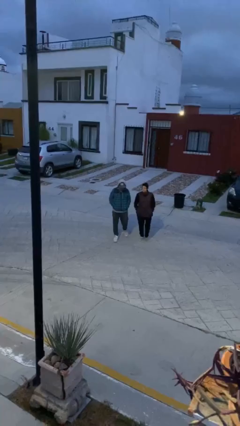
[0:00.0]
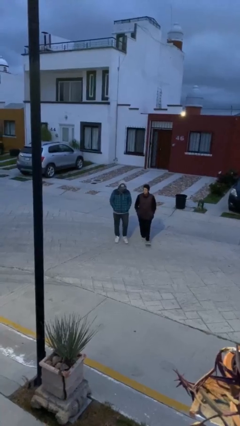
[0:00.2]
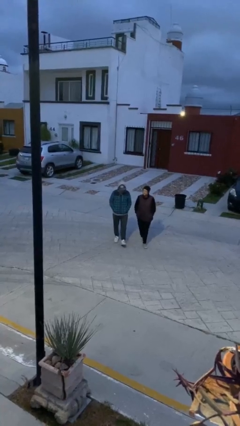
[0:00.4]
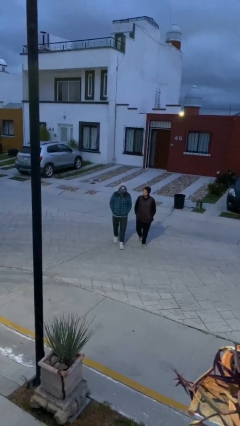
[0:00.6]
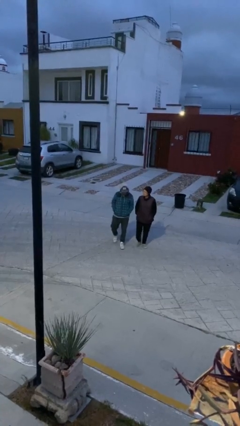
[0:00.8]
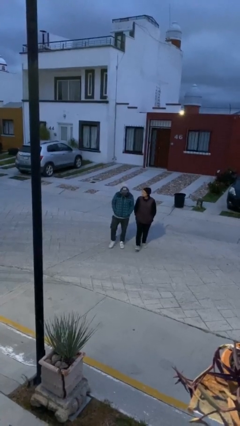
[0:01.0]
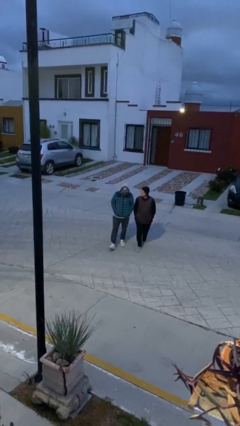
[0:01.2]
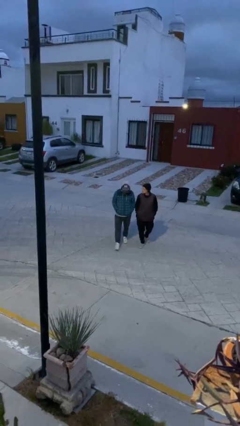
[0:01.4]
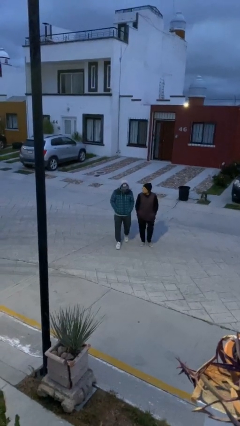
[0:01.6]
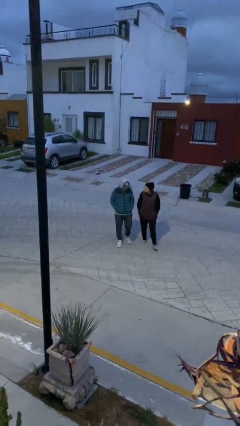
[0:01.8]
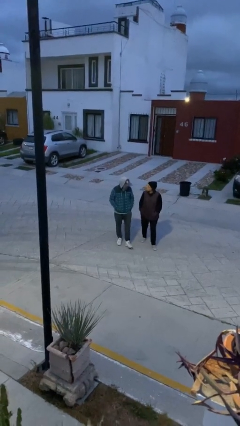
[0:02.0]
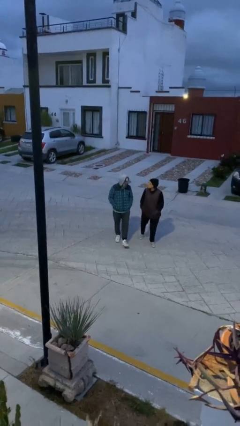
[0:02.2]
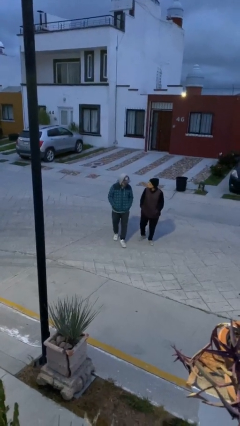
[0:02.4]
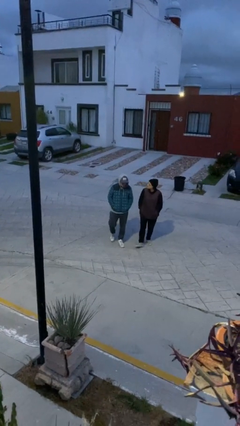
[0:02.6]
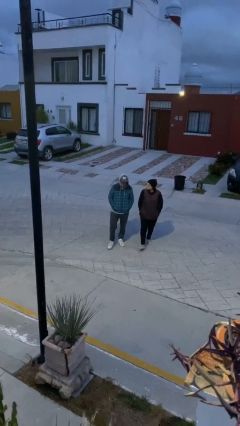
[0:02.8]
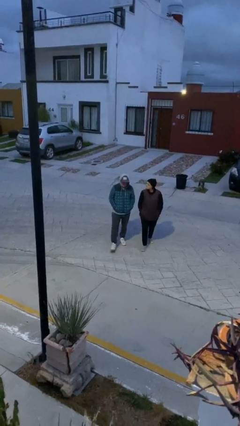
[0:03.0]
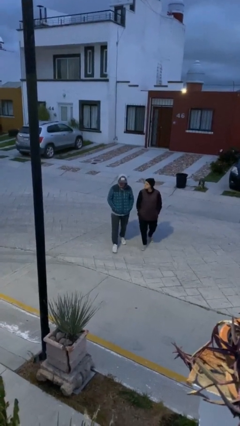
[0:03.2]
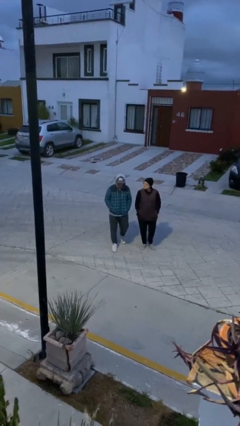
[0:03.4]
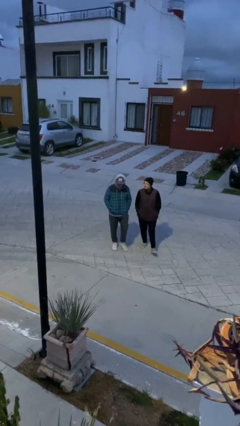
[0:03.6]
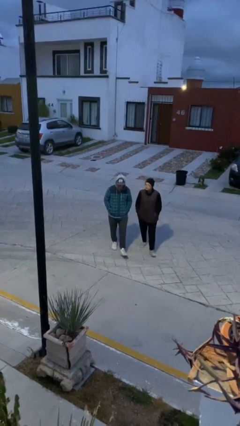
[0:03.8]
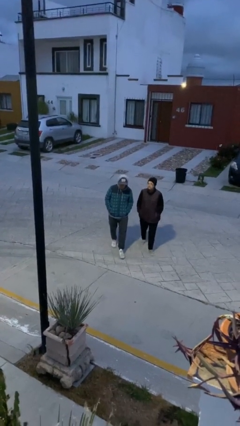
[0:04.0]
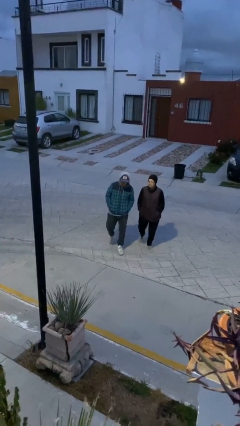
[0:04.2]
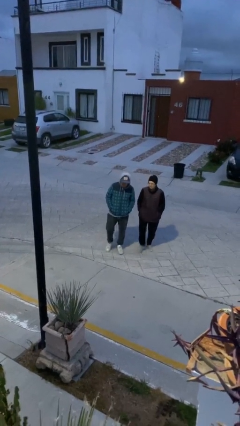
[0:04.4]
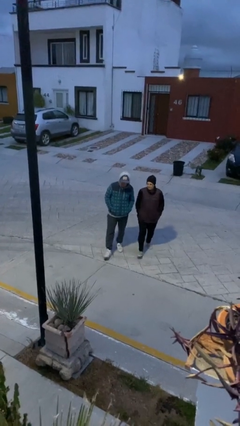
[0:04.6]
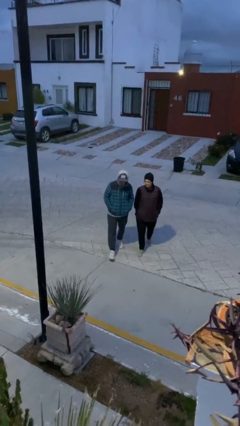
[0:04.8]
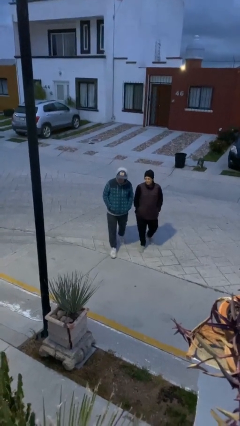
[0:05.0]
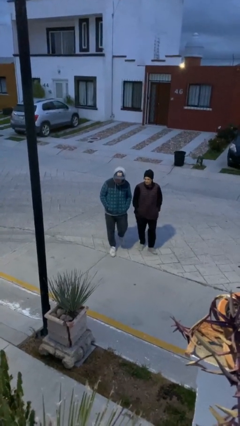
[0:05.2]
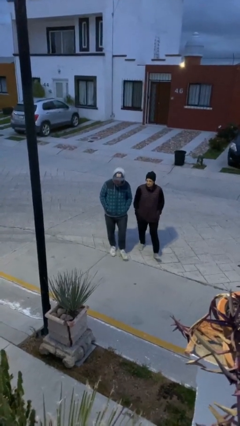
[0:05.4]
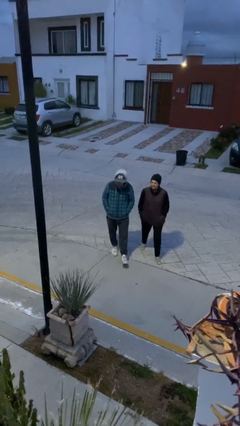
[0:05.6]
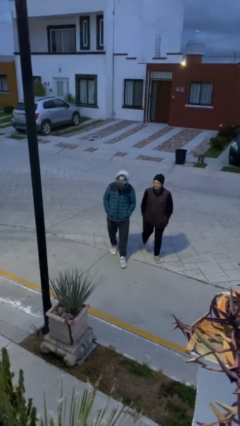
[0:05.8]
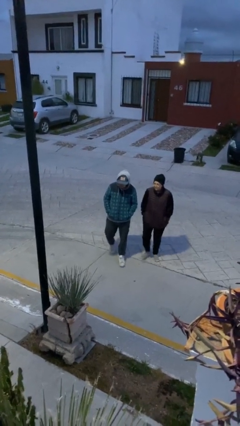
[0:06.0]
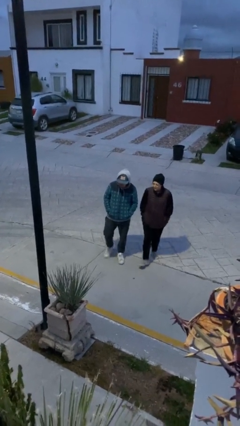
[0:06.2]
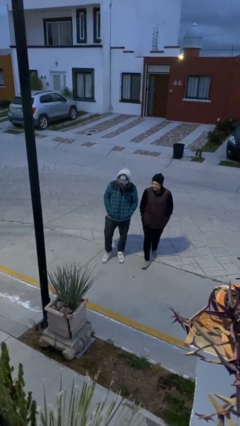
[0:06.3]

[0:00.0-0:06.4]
person talks to person

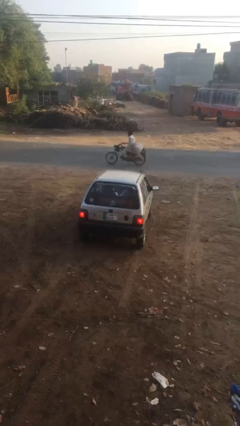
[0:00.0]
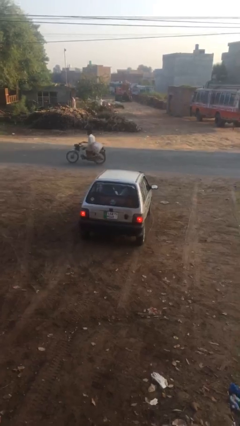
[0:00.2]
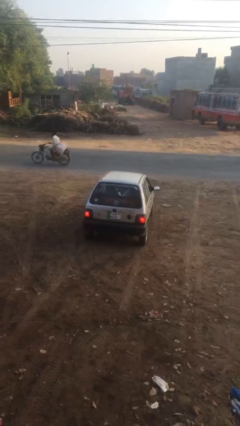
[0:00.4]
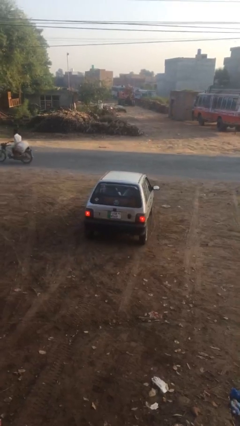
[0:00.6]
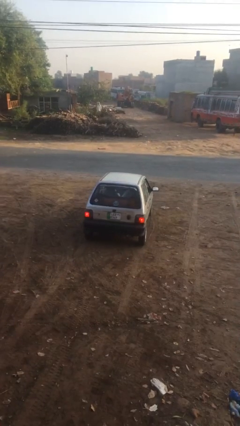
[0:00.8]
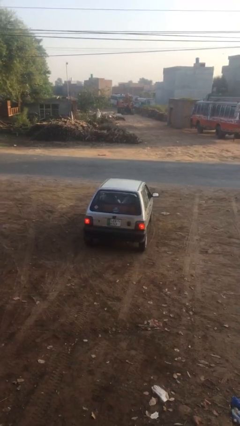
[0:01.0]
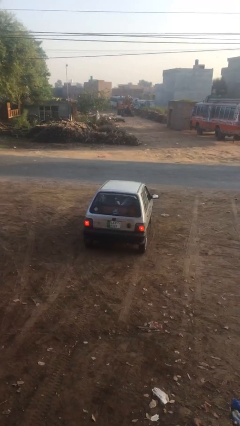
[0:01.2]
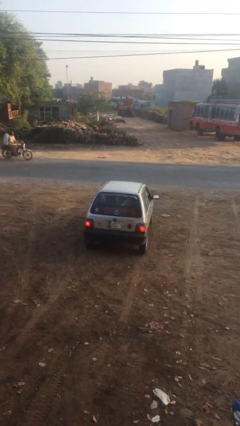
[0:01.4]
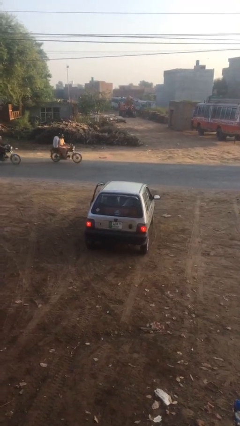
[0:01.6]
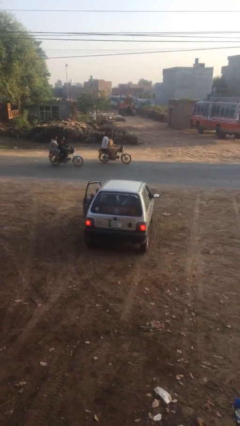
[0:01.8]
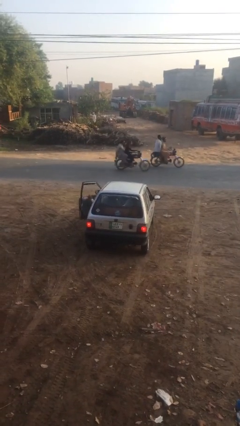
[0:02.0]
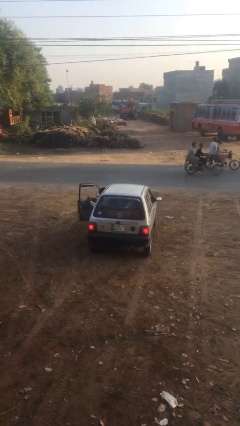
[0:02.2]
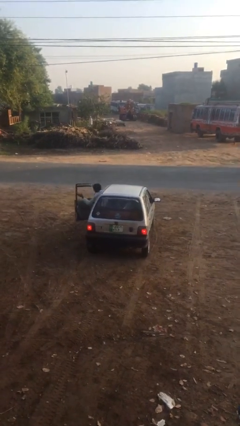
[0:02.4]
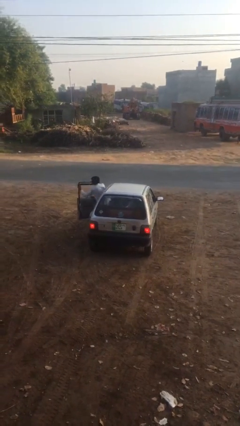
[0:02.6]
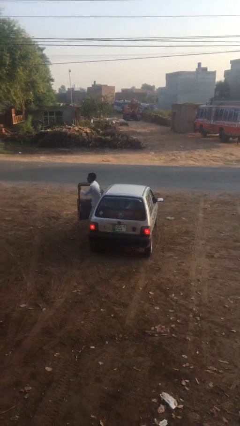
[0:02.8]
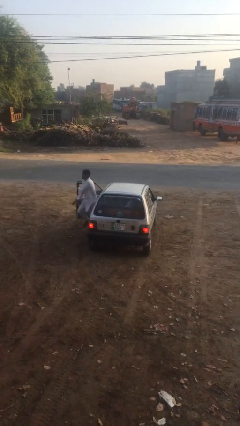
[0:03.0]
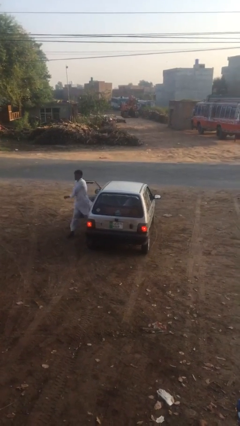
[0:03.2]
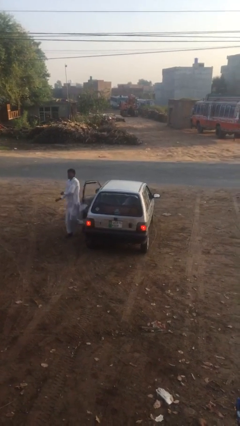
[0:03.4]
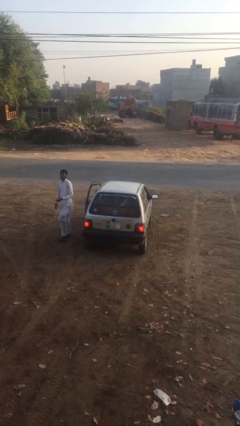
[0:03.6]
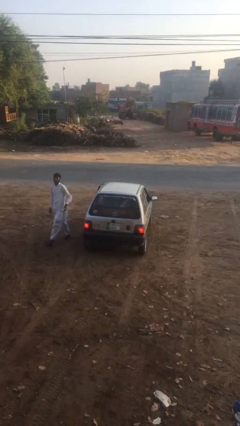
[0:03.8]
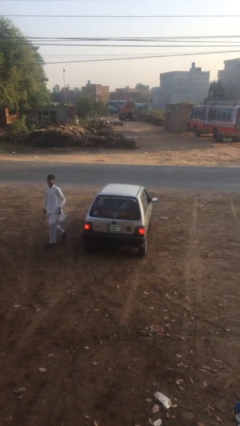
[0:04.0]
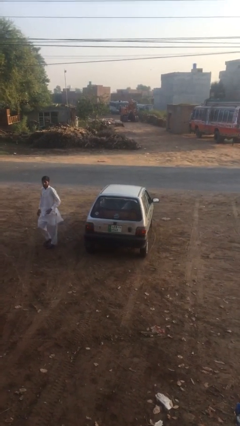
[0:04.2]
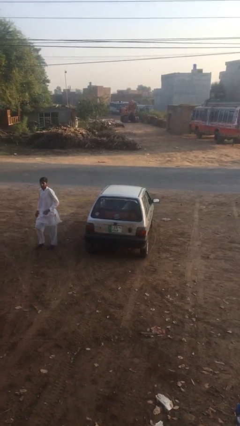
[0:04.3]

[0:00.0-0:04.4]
car drops off person

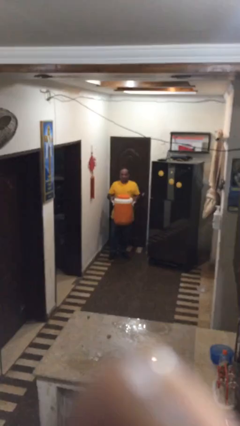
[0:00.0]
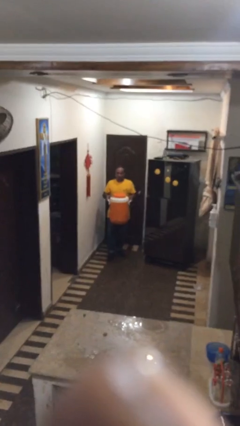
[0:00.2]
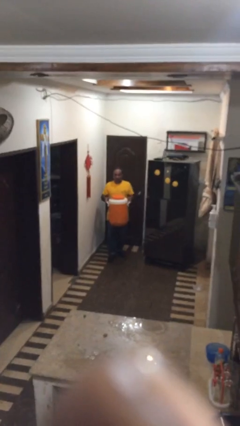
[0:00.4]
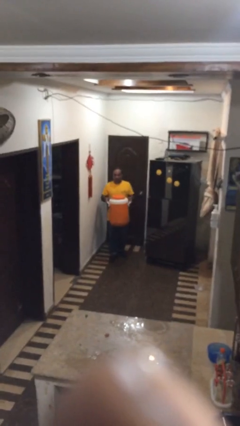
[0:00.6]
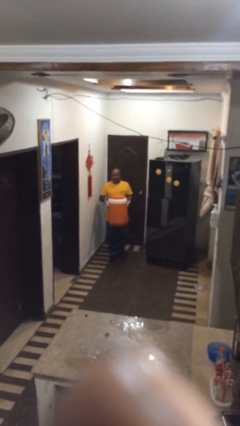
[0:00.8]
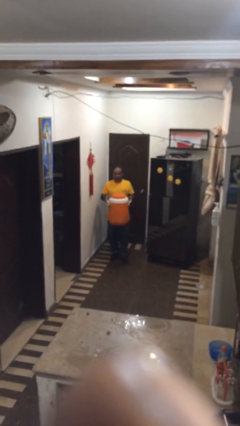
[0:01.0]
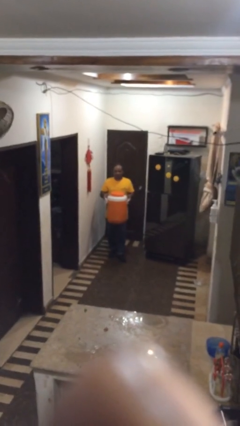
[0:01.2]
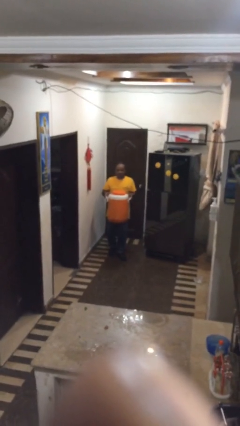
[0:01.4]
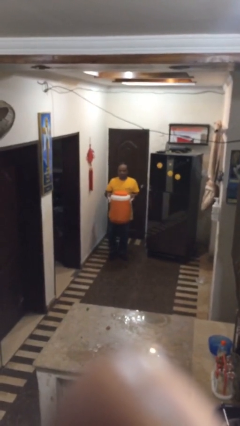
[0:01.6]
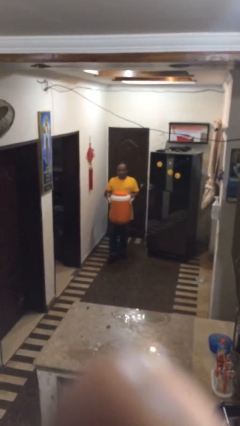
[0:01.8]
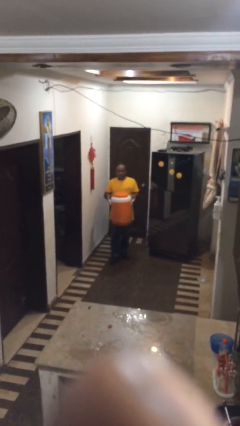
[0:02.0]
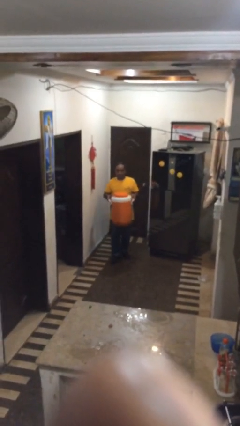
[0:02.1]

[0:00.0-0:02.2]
person carries heavy object

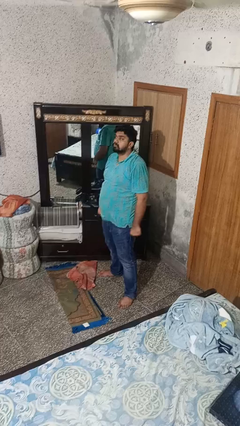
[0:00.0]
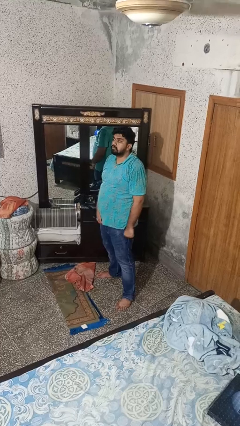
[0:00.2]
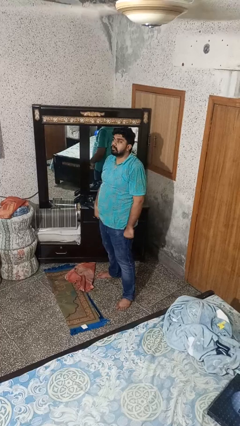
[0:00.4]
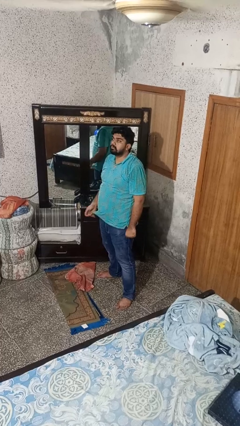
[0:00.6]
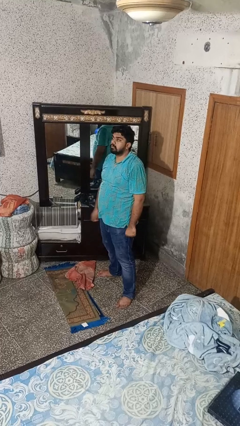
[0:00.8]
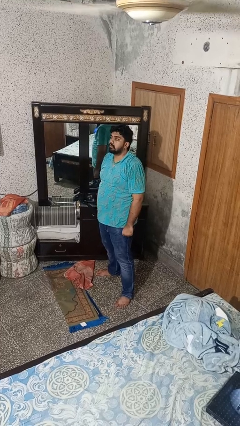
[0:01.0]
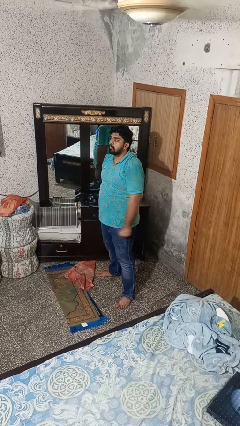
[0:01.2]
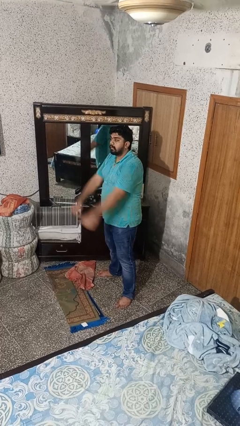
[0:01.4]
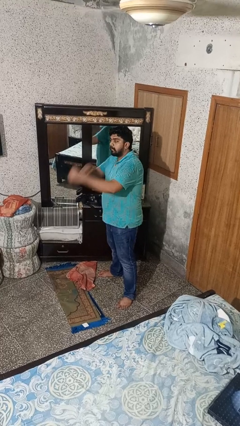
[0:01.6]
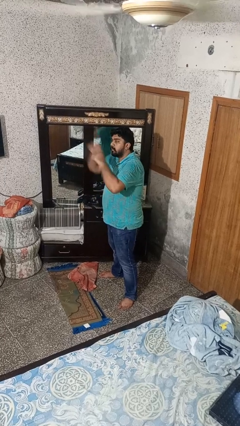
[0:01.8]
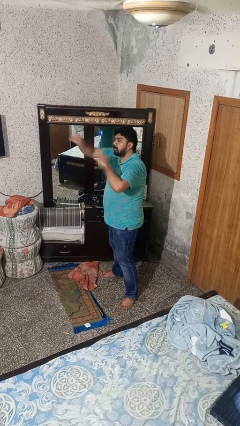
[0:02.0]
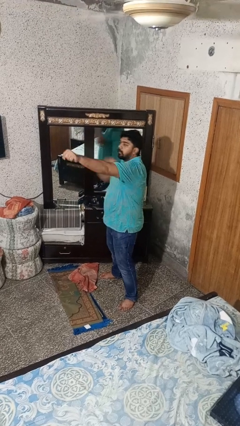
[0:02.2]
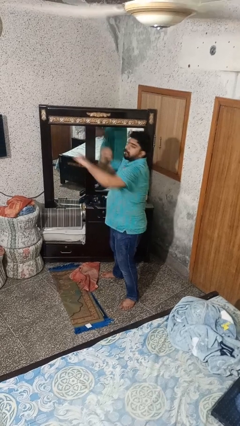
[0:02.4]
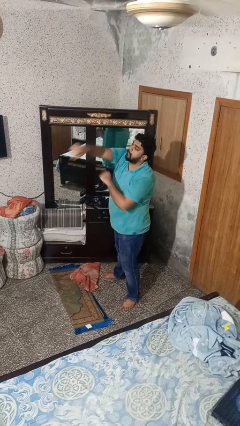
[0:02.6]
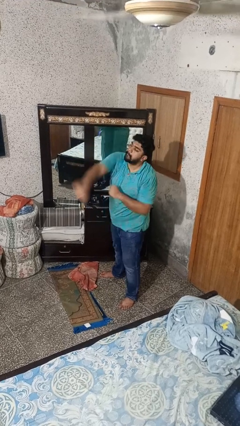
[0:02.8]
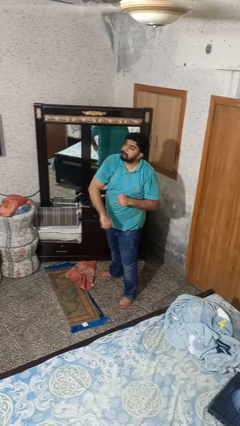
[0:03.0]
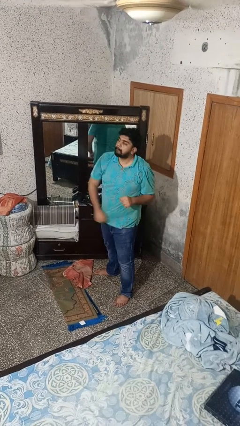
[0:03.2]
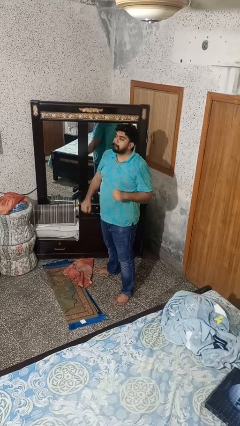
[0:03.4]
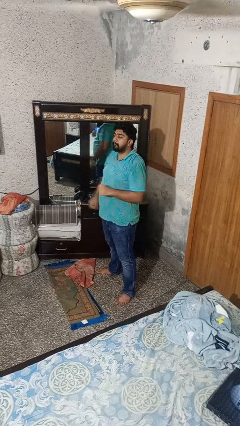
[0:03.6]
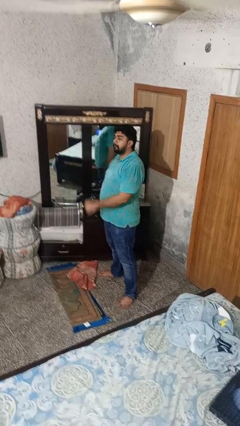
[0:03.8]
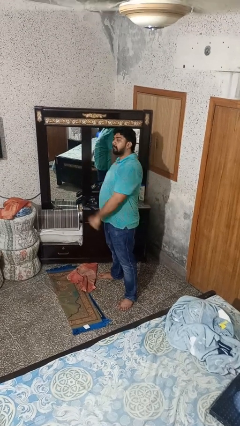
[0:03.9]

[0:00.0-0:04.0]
person punches

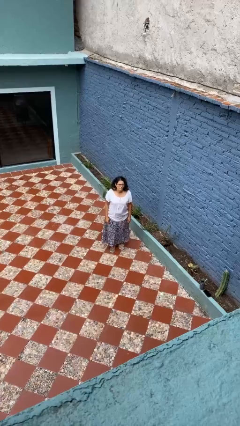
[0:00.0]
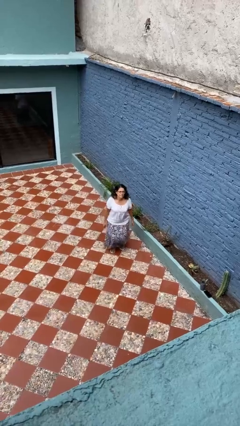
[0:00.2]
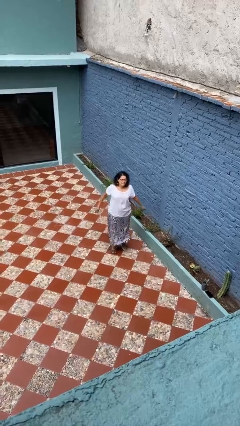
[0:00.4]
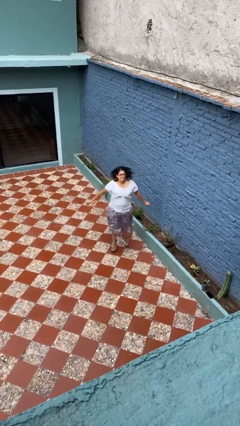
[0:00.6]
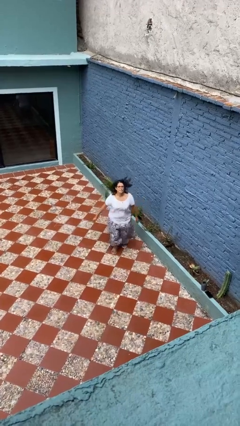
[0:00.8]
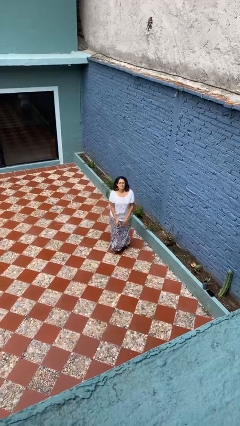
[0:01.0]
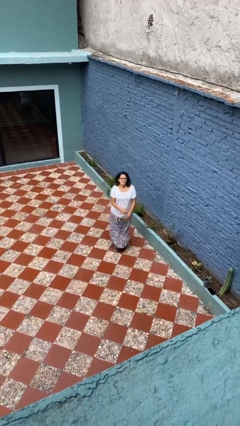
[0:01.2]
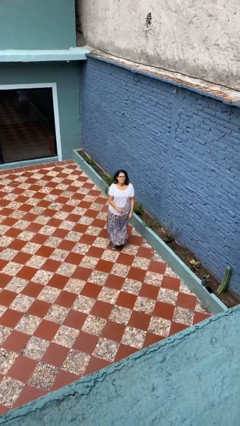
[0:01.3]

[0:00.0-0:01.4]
person jumps
